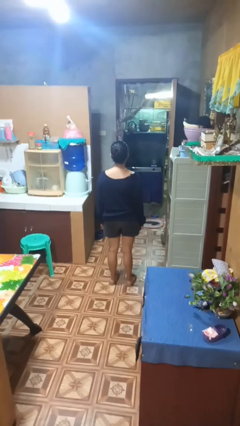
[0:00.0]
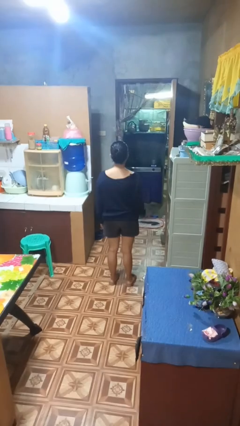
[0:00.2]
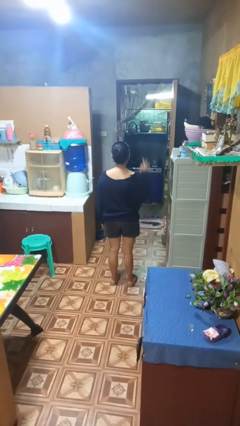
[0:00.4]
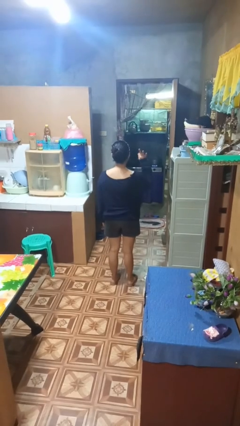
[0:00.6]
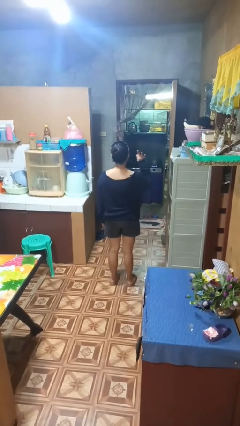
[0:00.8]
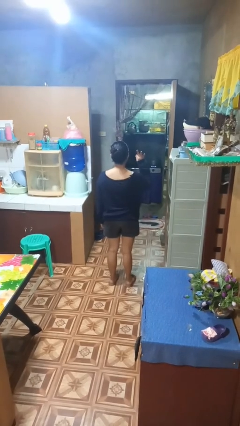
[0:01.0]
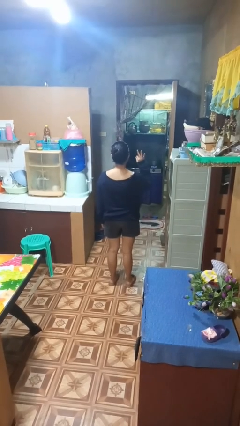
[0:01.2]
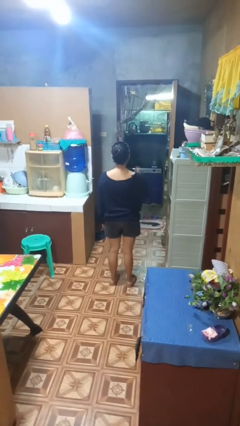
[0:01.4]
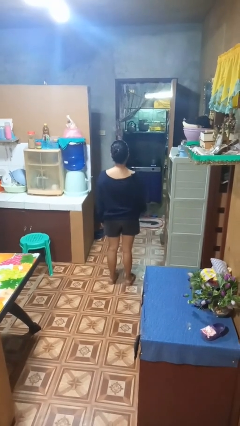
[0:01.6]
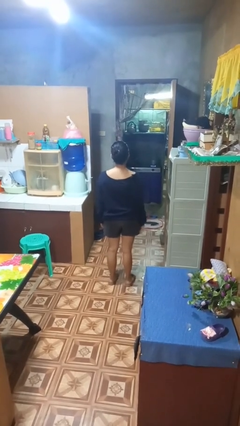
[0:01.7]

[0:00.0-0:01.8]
person gestures number three

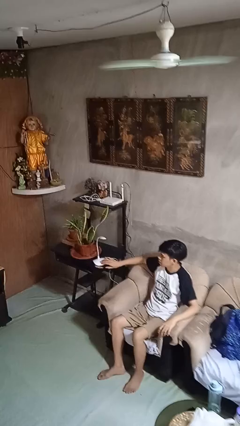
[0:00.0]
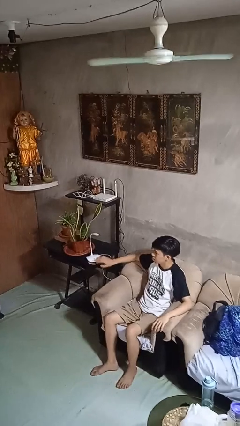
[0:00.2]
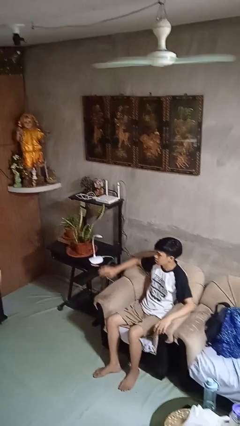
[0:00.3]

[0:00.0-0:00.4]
person turns off lamp

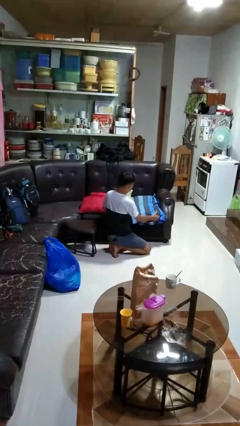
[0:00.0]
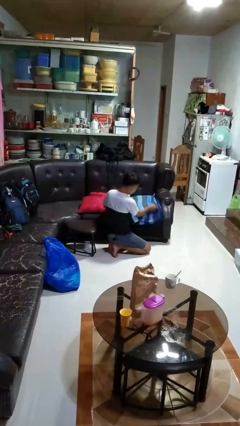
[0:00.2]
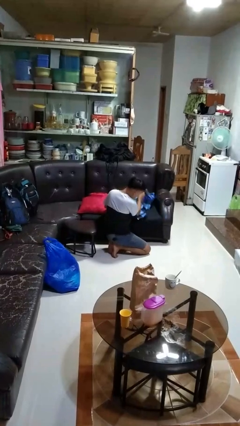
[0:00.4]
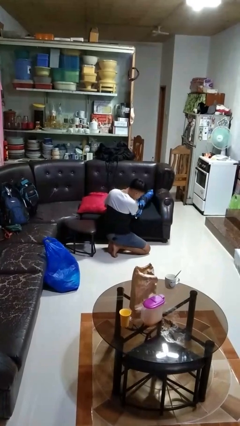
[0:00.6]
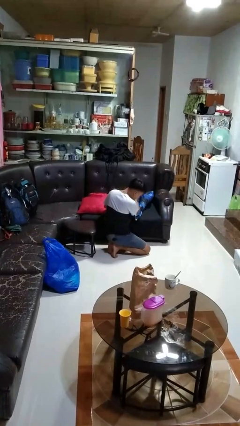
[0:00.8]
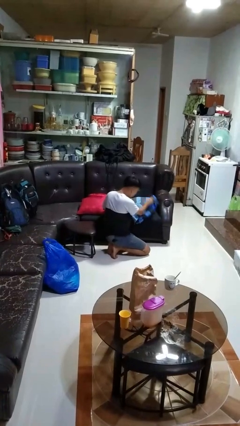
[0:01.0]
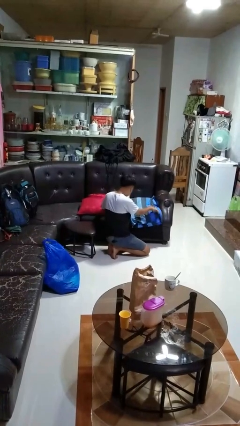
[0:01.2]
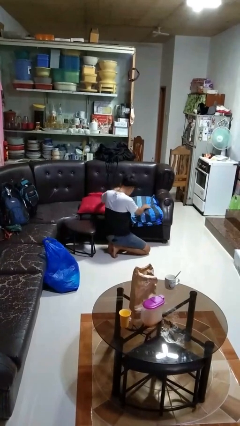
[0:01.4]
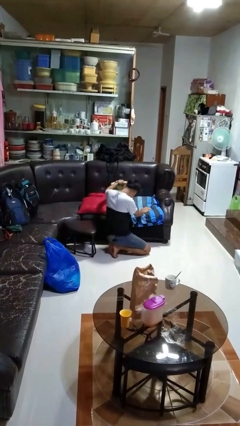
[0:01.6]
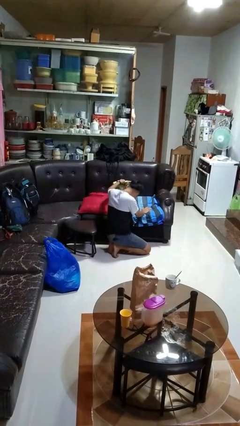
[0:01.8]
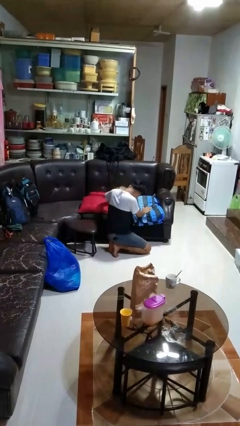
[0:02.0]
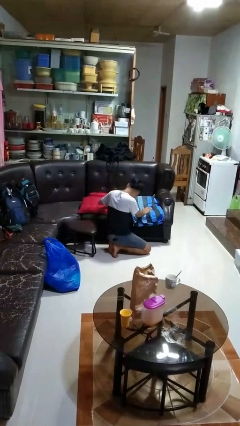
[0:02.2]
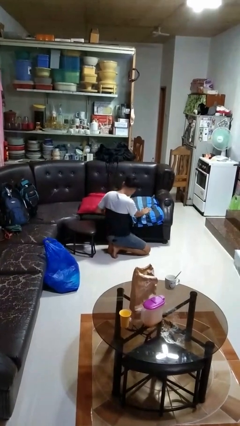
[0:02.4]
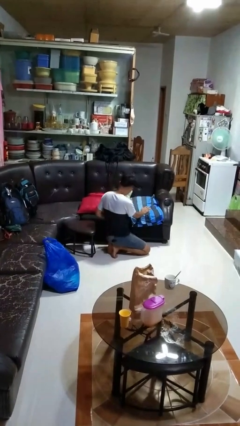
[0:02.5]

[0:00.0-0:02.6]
person searches in couch

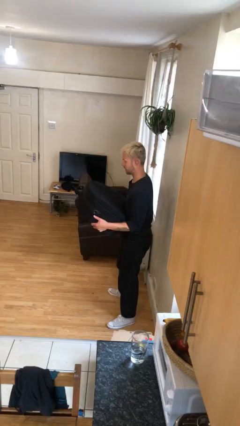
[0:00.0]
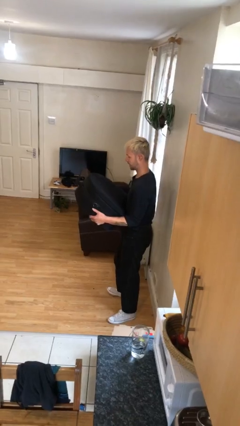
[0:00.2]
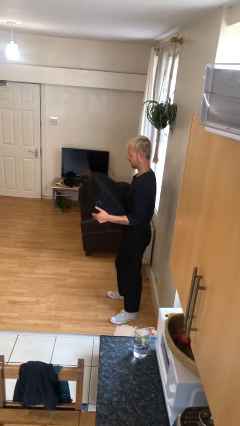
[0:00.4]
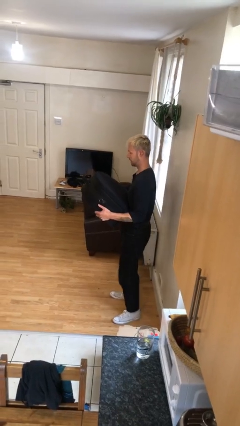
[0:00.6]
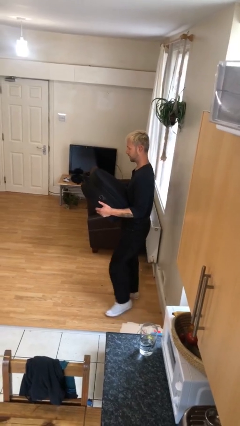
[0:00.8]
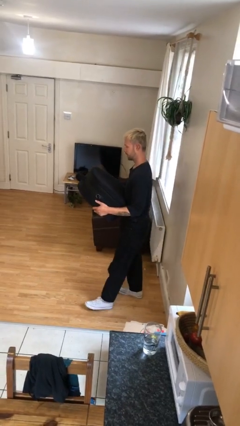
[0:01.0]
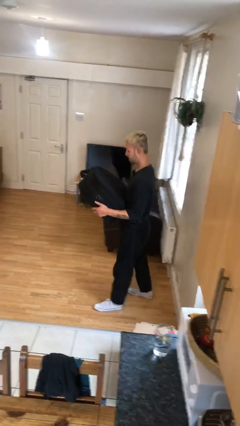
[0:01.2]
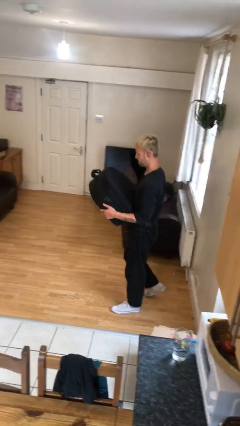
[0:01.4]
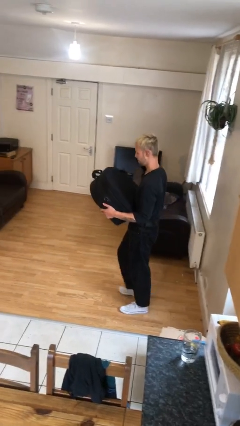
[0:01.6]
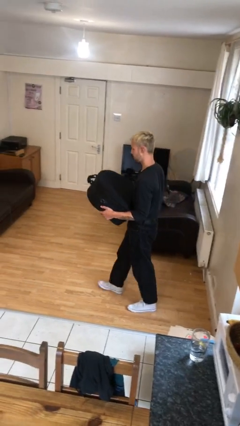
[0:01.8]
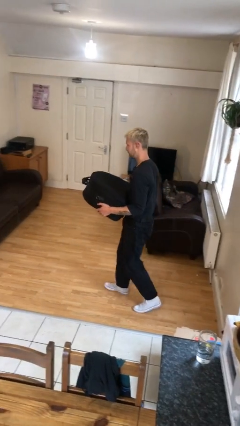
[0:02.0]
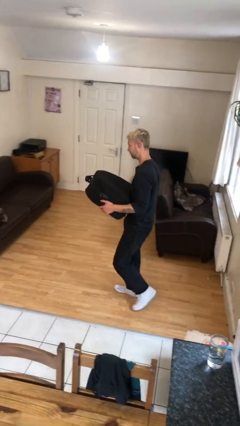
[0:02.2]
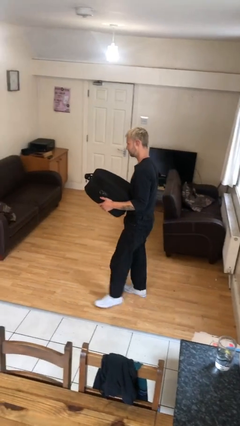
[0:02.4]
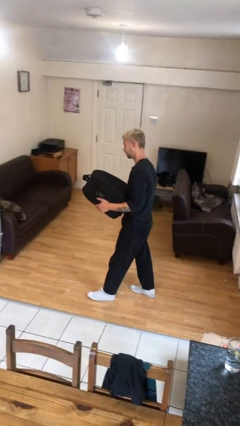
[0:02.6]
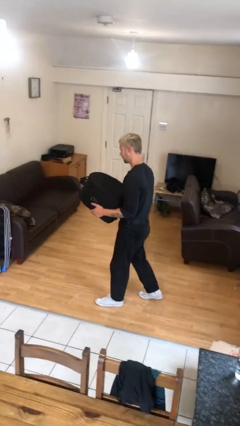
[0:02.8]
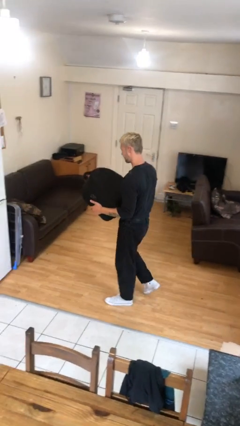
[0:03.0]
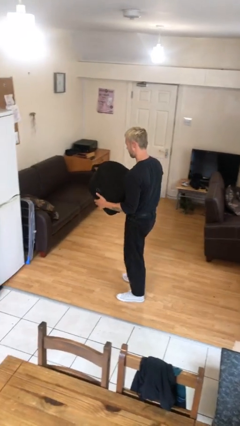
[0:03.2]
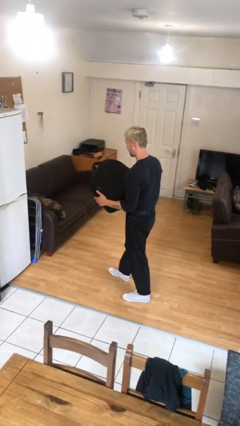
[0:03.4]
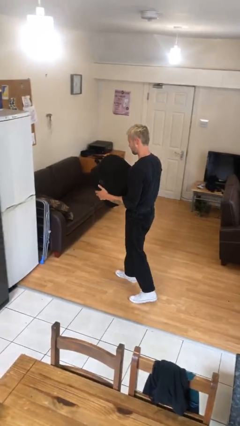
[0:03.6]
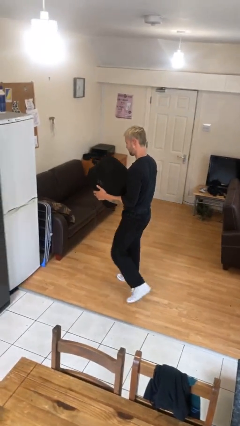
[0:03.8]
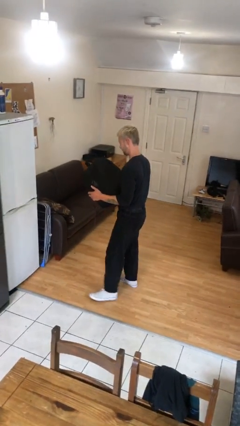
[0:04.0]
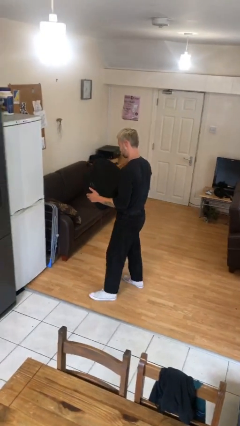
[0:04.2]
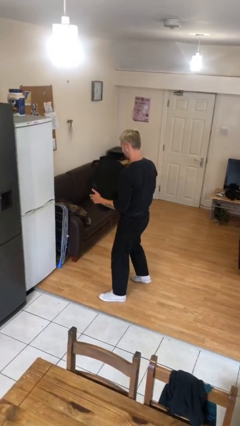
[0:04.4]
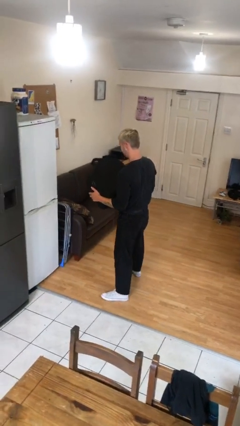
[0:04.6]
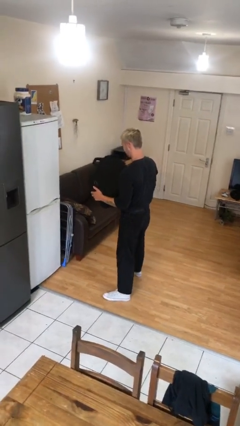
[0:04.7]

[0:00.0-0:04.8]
person carries heavy object

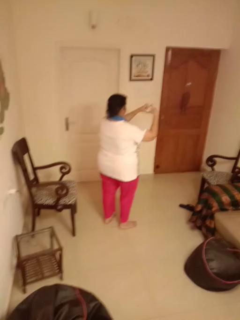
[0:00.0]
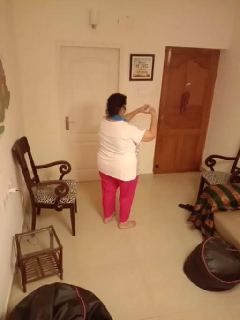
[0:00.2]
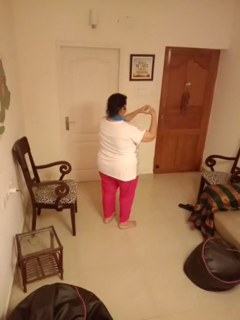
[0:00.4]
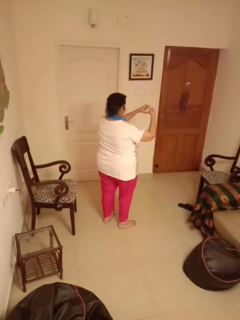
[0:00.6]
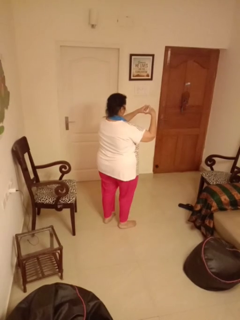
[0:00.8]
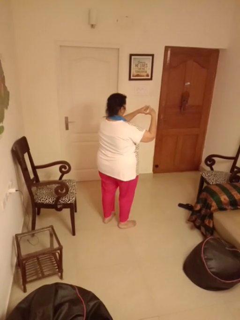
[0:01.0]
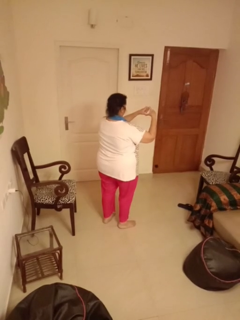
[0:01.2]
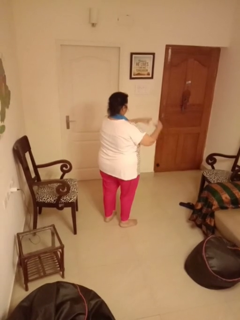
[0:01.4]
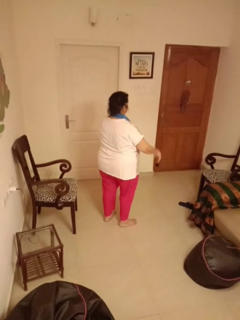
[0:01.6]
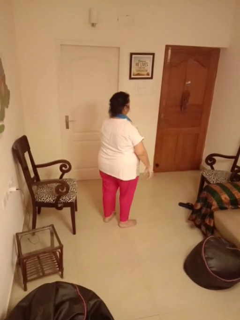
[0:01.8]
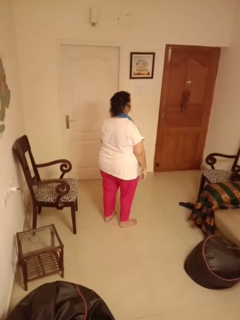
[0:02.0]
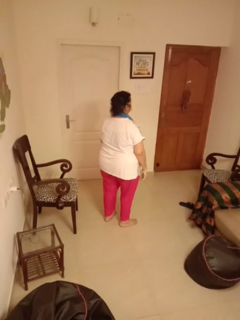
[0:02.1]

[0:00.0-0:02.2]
person gestures heart

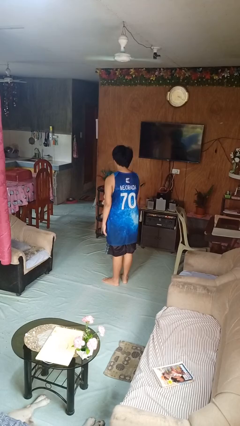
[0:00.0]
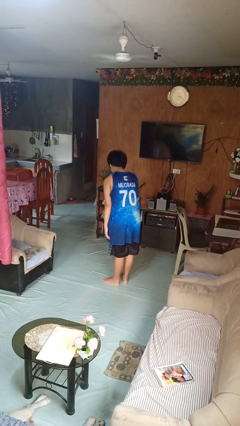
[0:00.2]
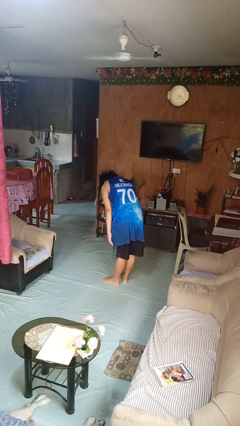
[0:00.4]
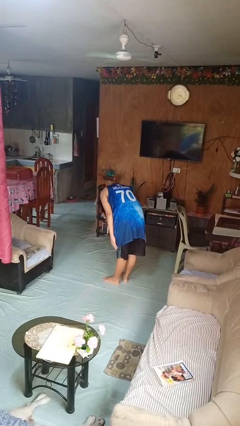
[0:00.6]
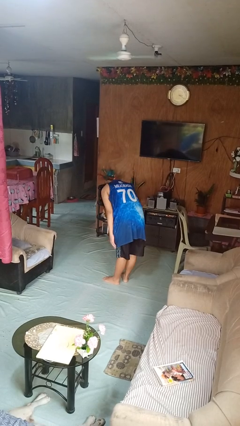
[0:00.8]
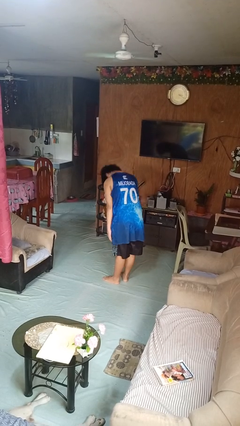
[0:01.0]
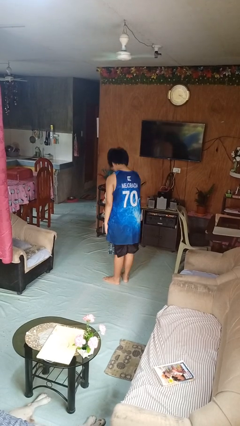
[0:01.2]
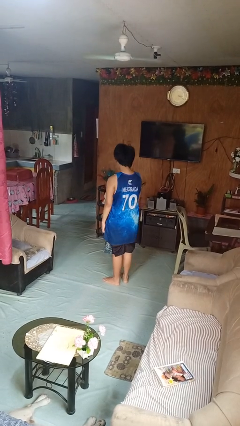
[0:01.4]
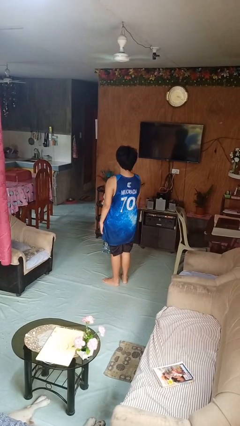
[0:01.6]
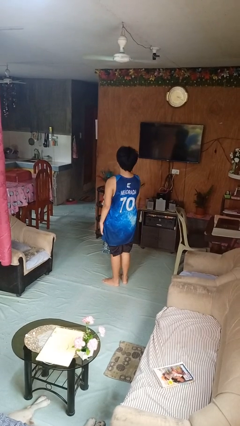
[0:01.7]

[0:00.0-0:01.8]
person bows

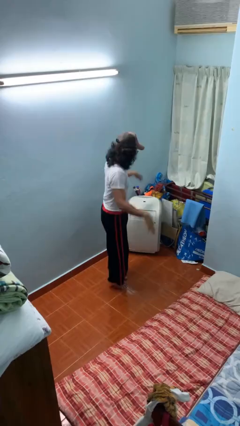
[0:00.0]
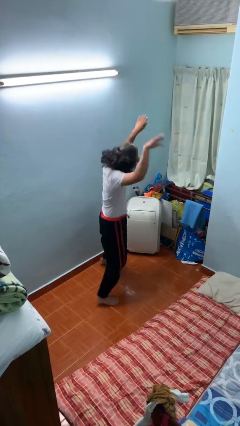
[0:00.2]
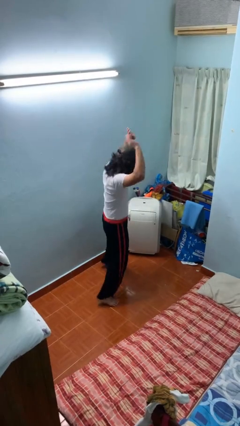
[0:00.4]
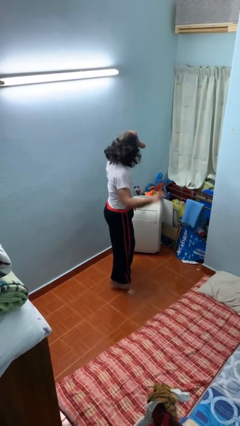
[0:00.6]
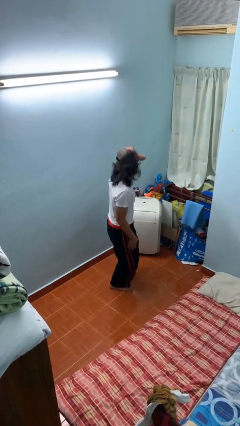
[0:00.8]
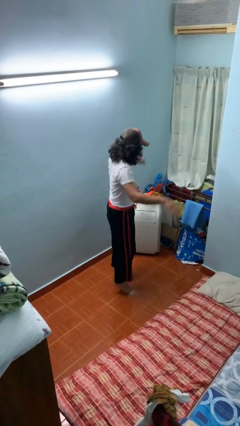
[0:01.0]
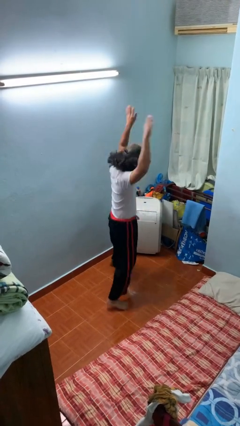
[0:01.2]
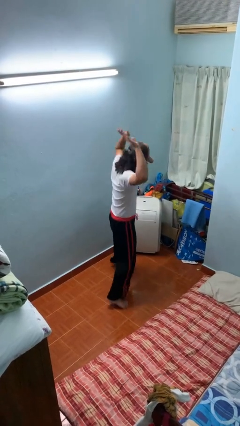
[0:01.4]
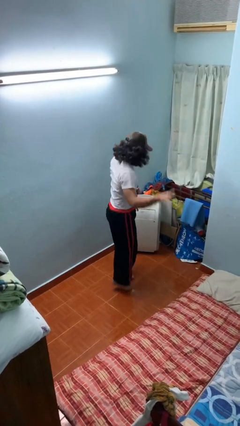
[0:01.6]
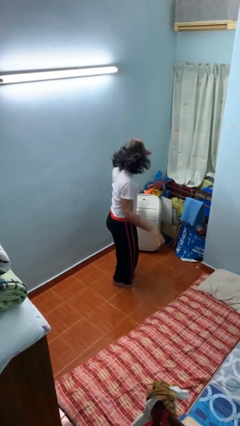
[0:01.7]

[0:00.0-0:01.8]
person exercises with jumping jacks

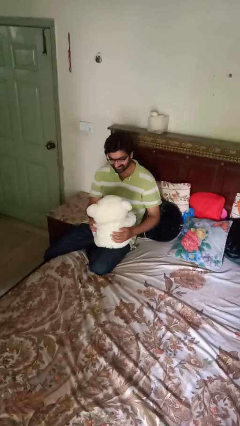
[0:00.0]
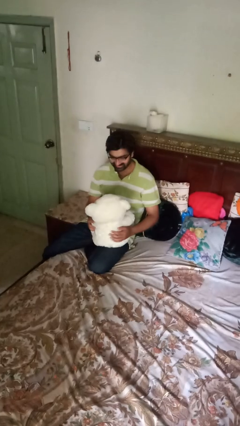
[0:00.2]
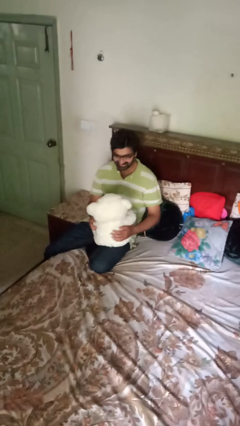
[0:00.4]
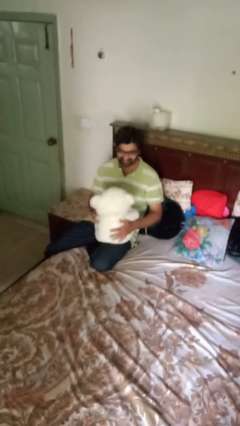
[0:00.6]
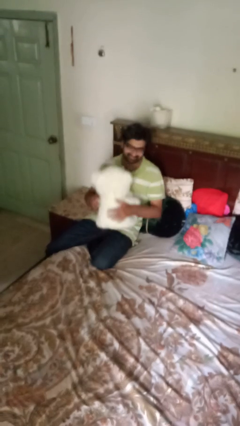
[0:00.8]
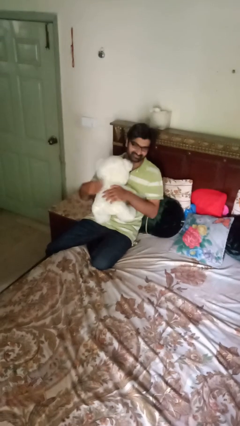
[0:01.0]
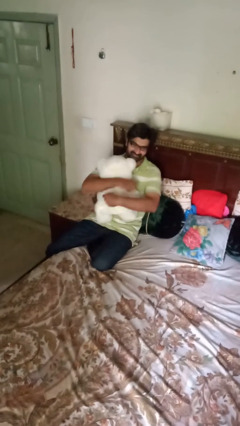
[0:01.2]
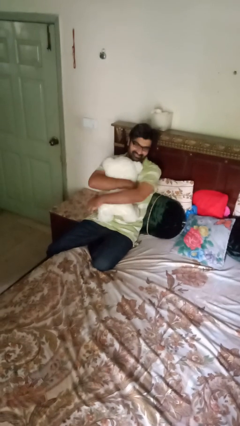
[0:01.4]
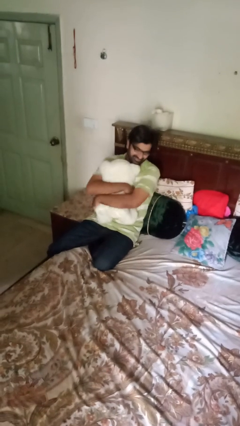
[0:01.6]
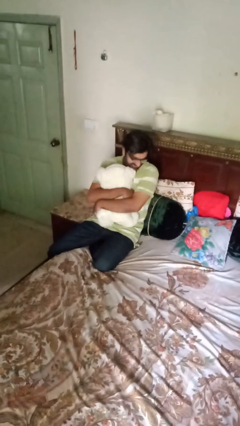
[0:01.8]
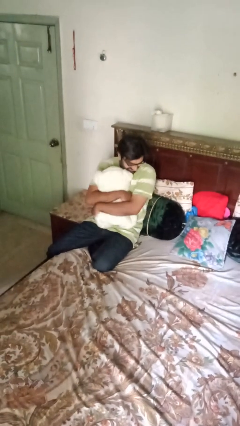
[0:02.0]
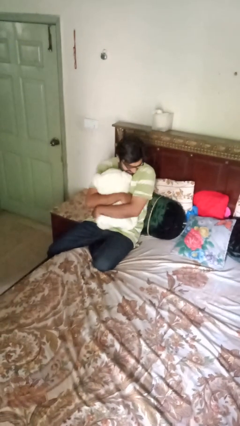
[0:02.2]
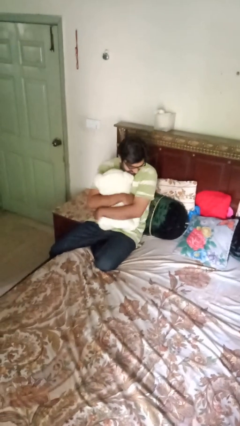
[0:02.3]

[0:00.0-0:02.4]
person hugs stuffed animal
